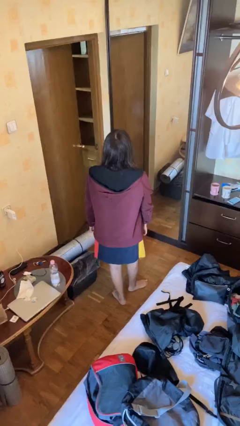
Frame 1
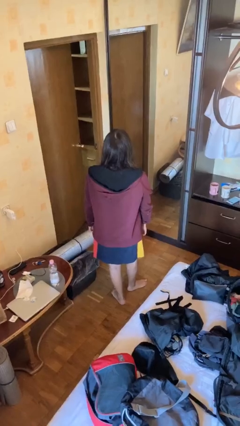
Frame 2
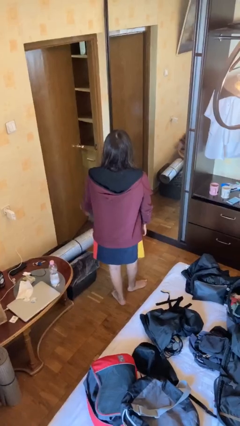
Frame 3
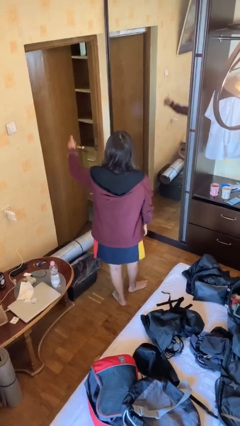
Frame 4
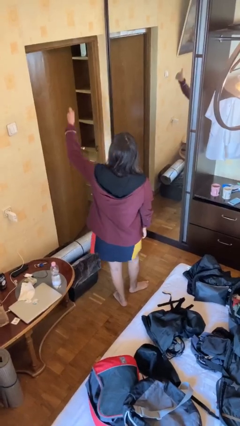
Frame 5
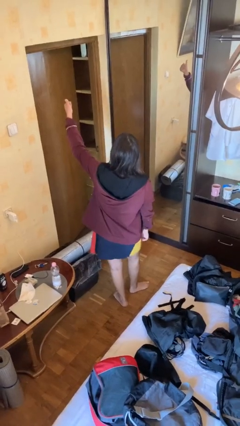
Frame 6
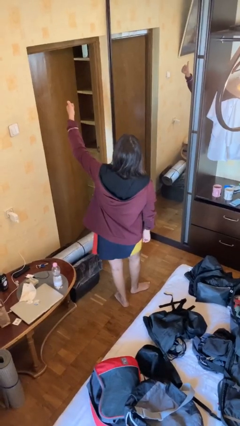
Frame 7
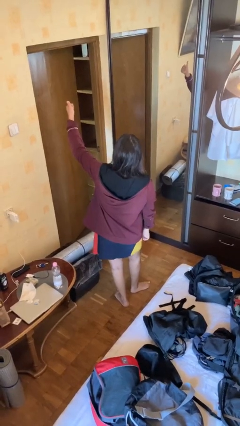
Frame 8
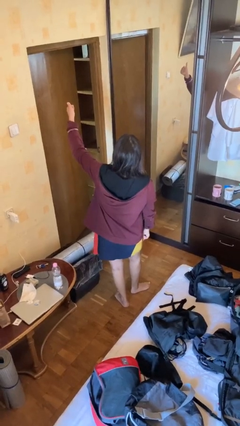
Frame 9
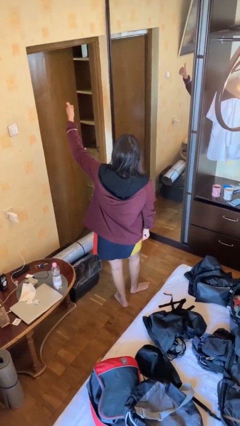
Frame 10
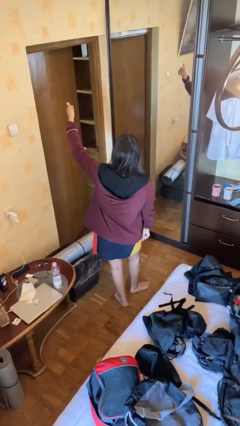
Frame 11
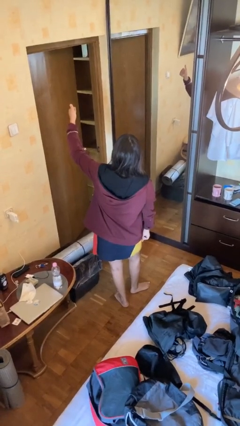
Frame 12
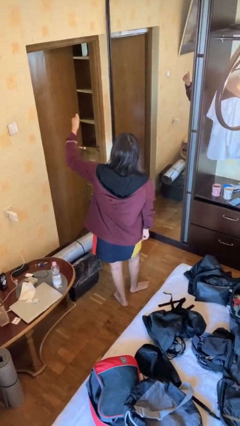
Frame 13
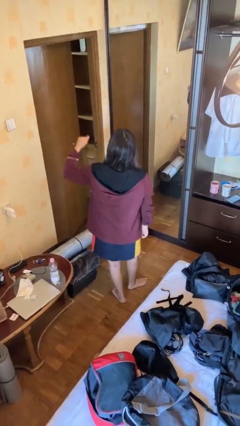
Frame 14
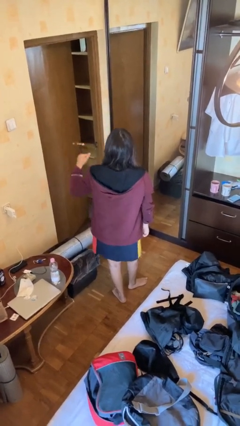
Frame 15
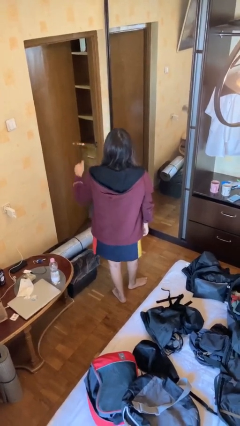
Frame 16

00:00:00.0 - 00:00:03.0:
person gestures thumbs up

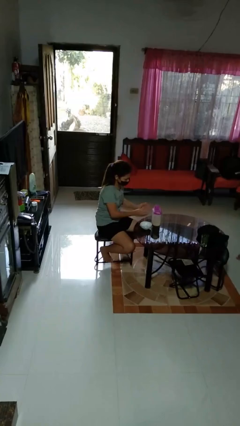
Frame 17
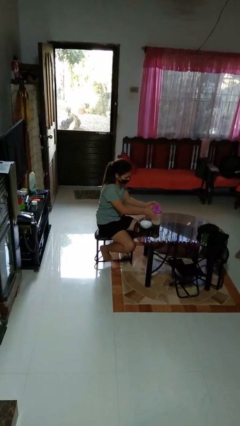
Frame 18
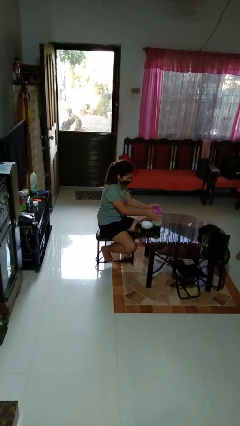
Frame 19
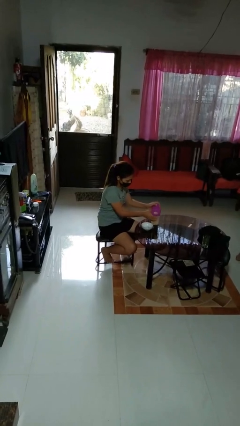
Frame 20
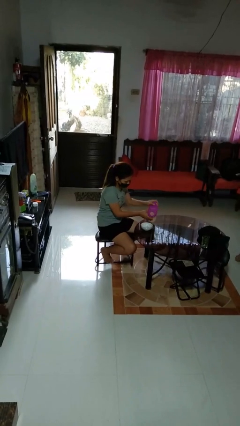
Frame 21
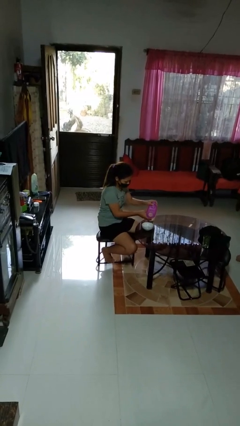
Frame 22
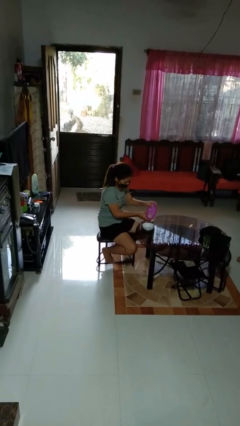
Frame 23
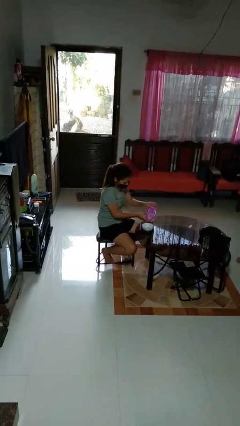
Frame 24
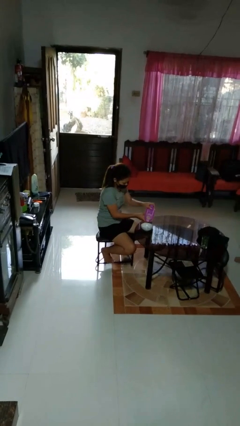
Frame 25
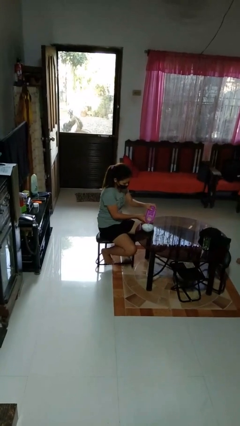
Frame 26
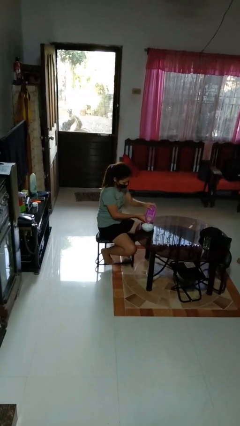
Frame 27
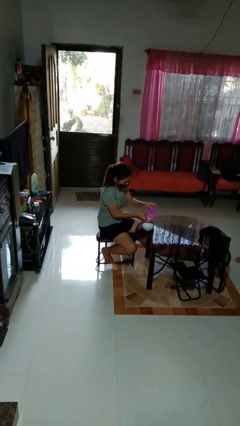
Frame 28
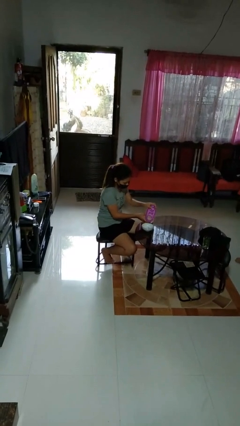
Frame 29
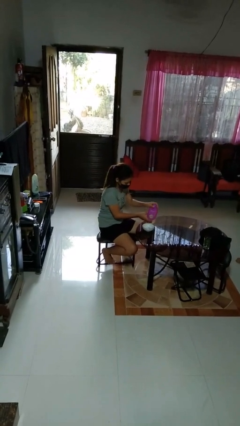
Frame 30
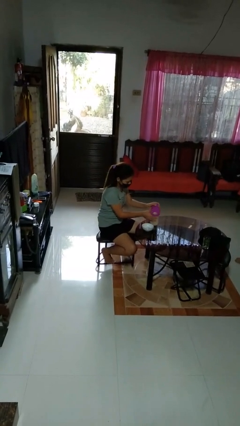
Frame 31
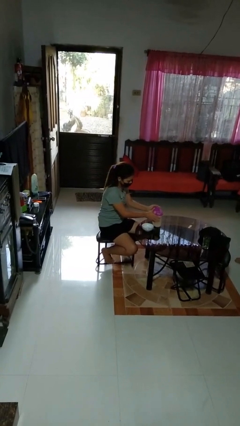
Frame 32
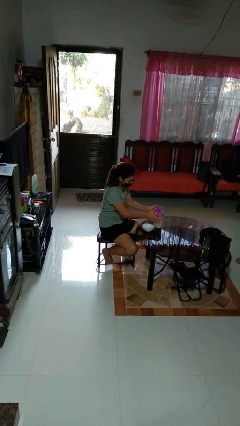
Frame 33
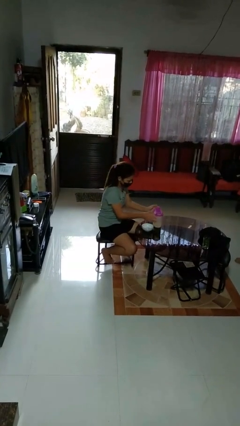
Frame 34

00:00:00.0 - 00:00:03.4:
person pours into bowl

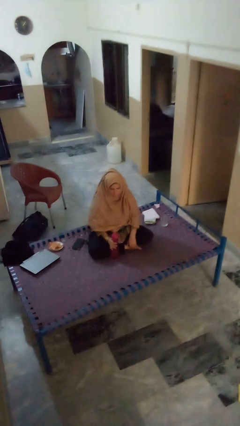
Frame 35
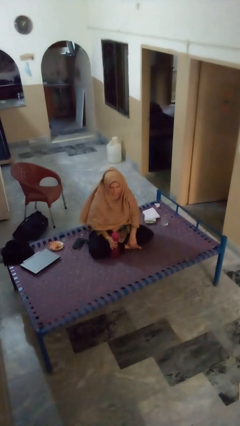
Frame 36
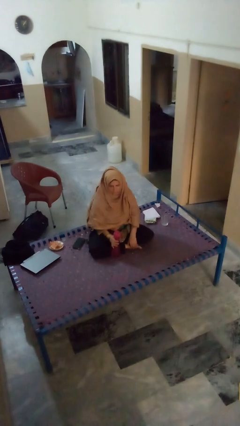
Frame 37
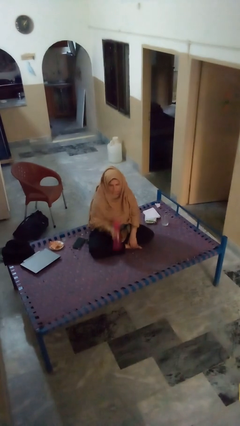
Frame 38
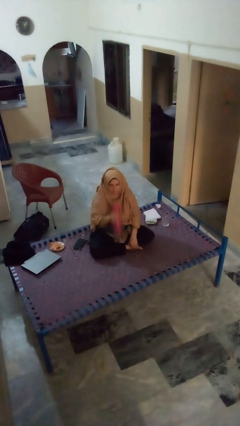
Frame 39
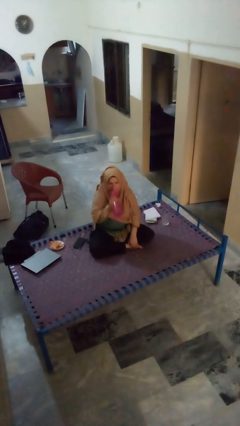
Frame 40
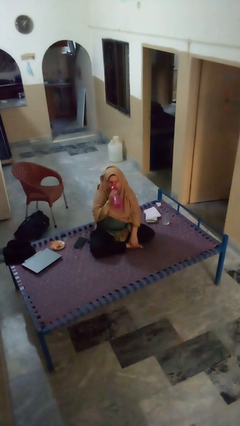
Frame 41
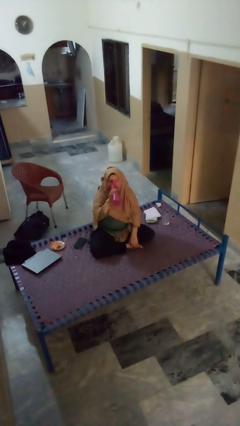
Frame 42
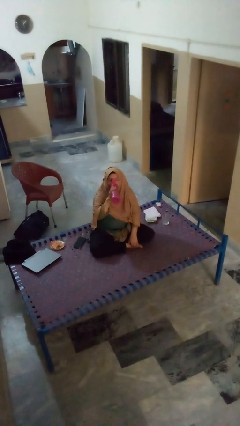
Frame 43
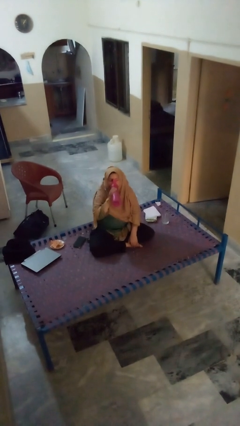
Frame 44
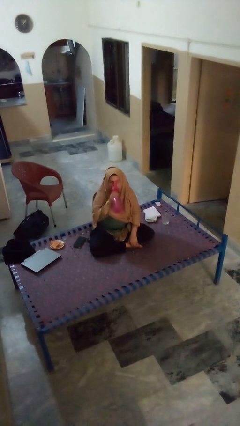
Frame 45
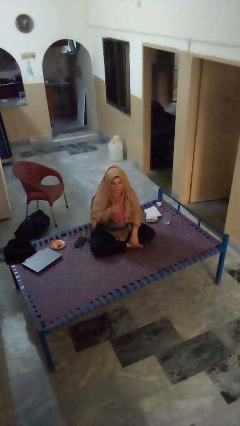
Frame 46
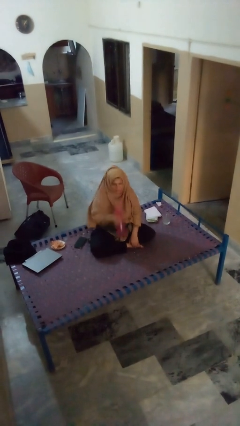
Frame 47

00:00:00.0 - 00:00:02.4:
person drinks from bottle

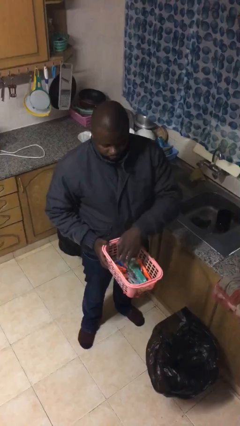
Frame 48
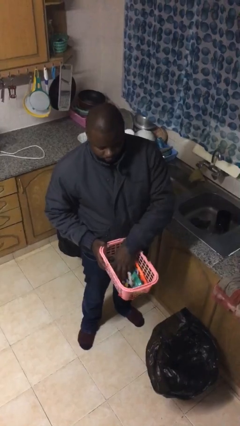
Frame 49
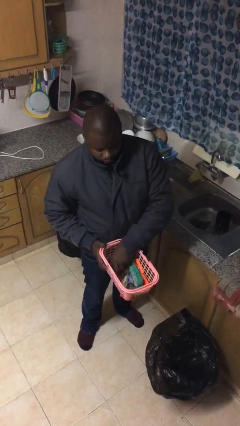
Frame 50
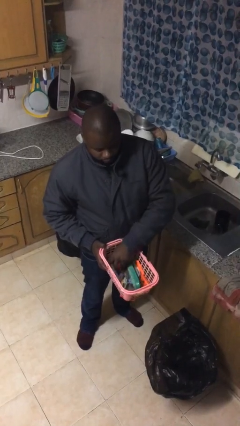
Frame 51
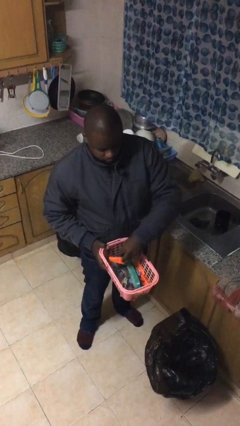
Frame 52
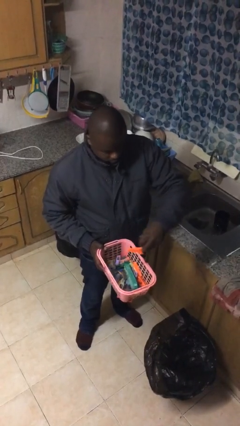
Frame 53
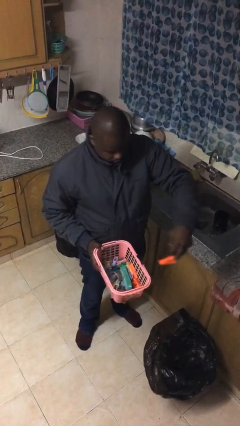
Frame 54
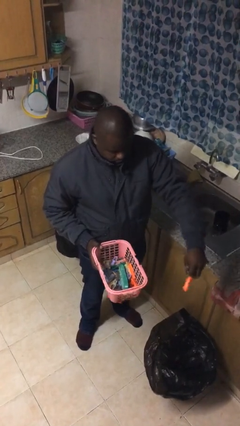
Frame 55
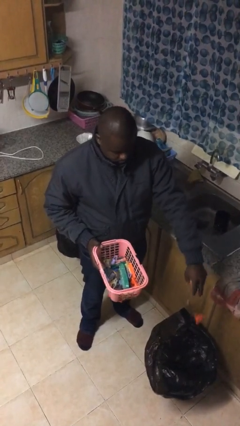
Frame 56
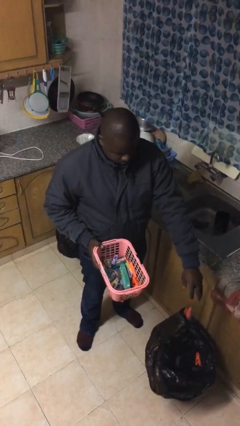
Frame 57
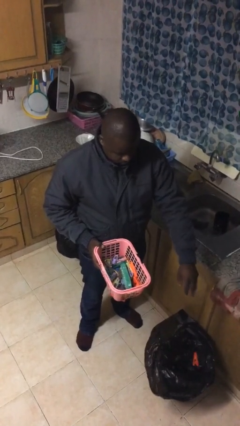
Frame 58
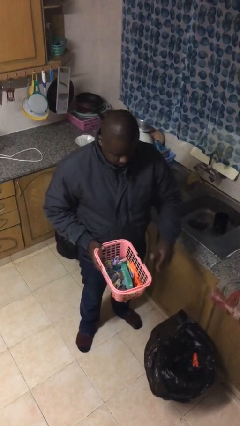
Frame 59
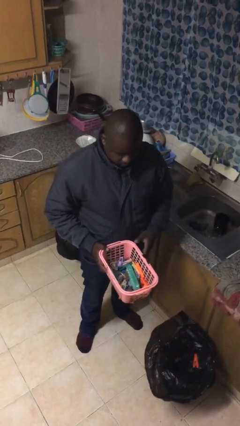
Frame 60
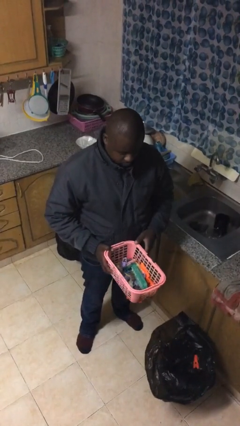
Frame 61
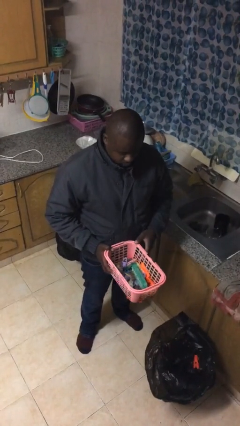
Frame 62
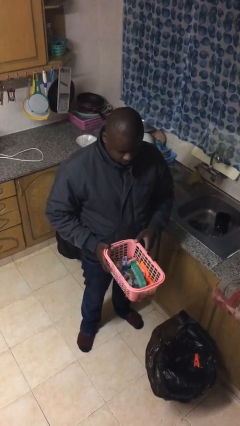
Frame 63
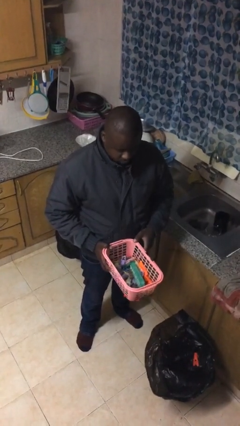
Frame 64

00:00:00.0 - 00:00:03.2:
person discards trash

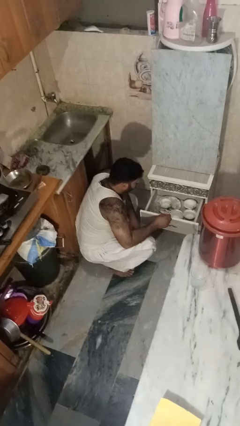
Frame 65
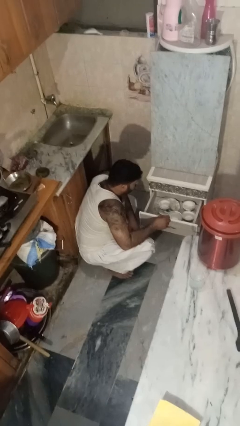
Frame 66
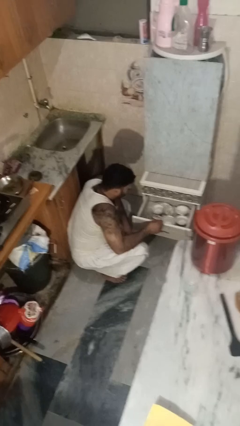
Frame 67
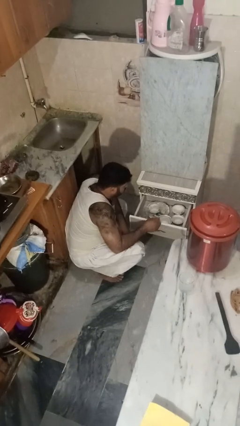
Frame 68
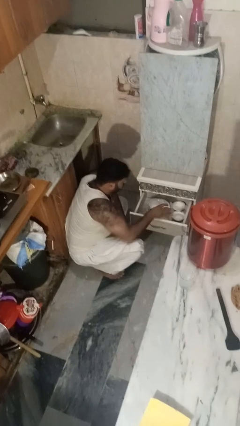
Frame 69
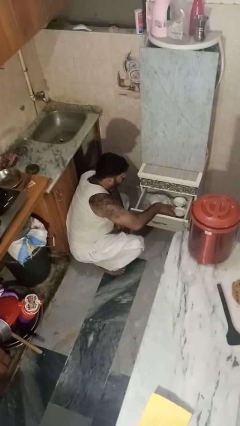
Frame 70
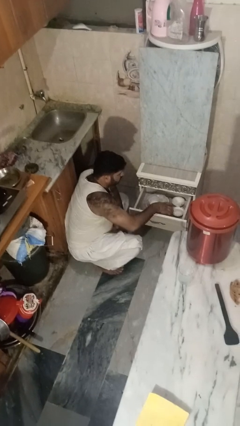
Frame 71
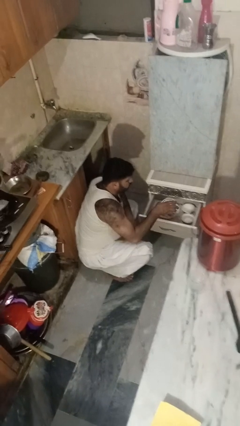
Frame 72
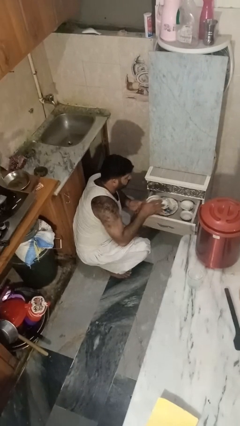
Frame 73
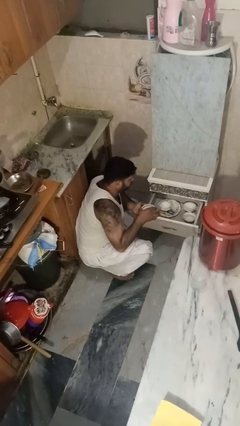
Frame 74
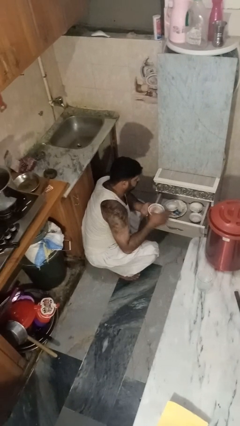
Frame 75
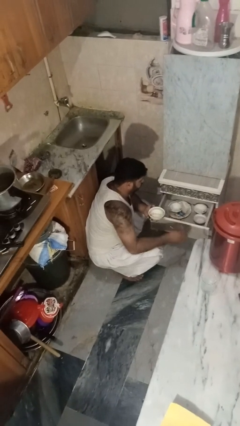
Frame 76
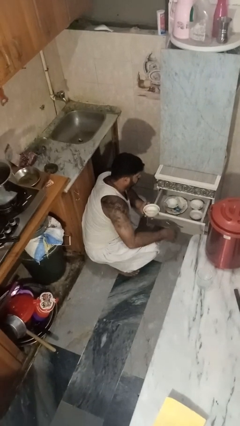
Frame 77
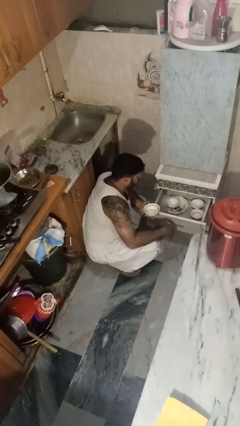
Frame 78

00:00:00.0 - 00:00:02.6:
person takes object from kitchen drawer

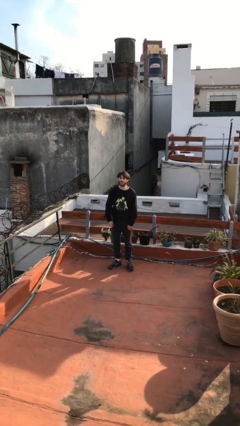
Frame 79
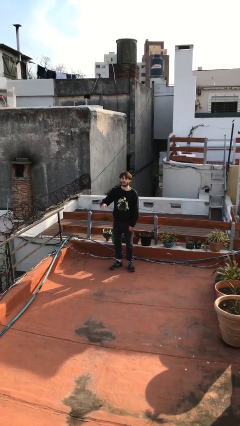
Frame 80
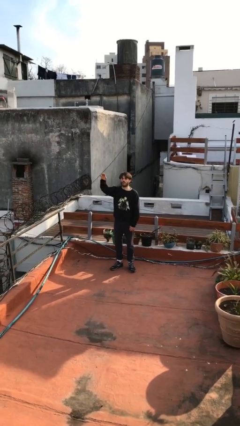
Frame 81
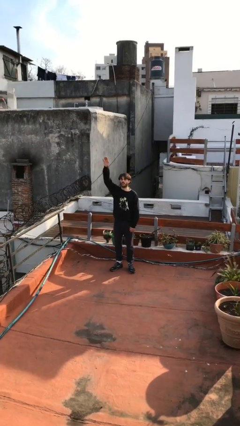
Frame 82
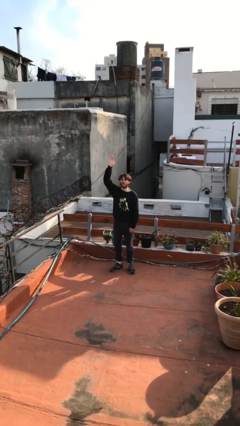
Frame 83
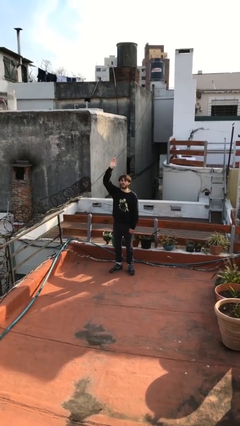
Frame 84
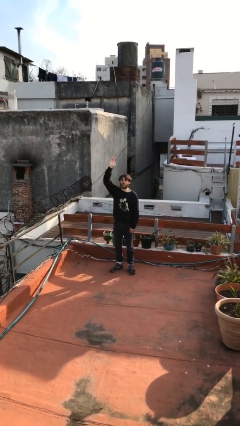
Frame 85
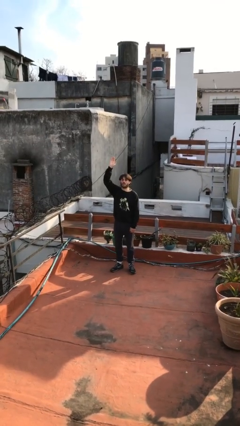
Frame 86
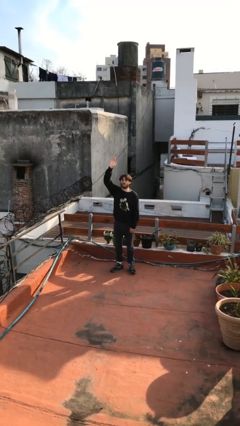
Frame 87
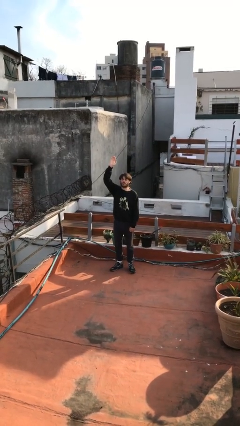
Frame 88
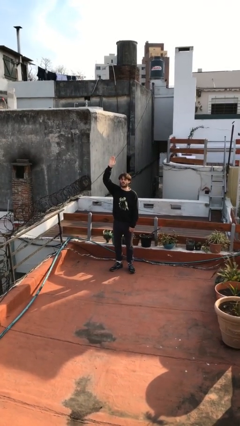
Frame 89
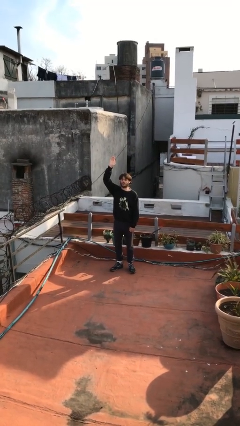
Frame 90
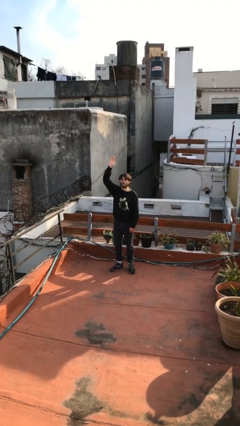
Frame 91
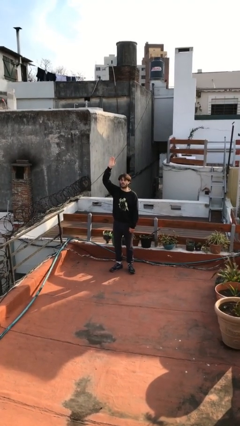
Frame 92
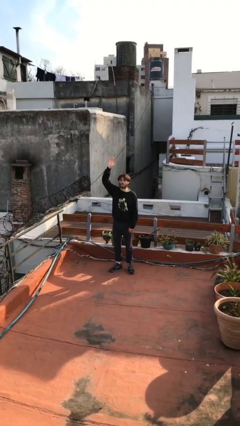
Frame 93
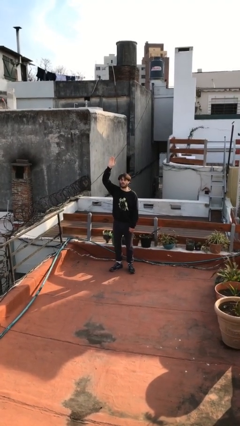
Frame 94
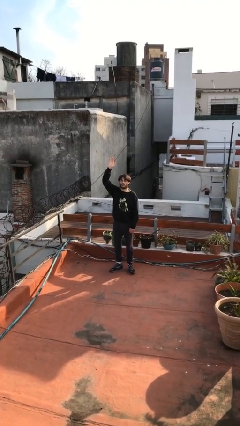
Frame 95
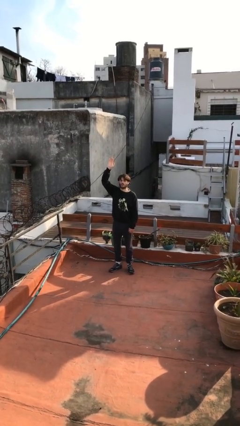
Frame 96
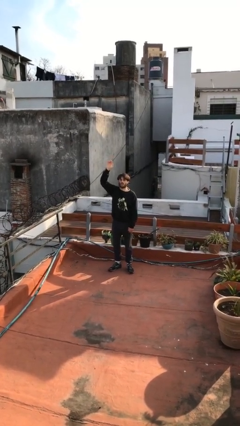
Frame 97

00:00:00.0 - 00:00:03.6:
person gestures raise hand
